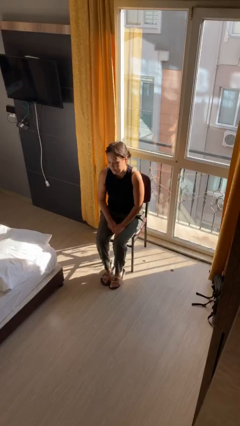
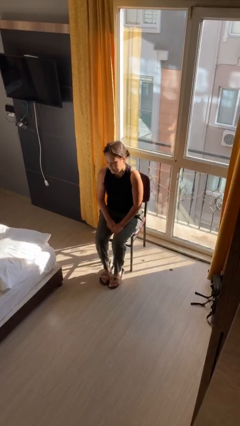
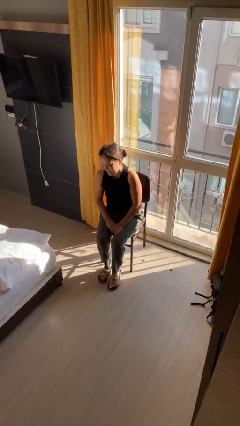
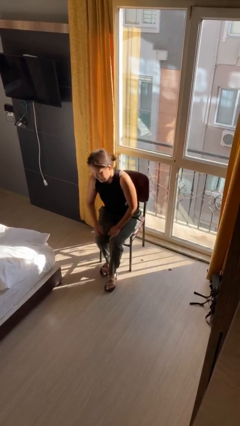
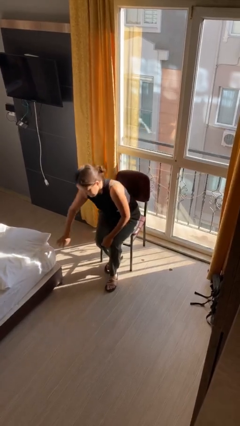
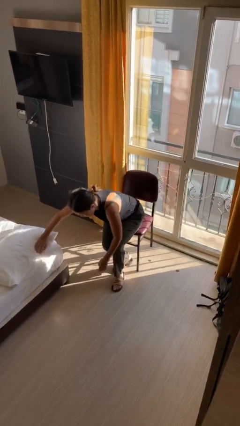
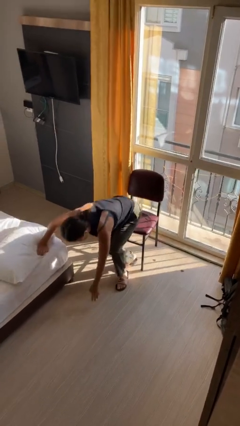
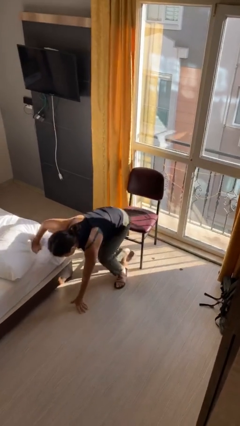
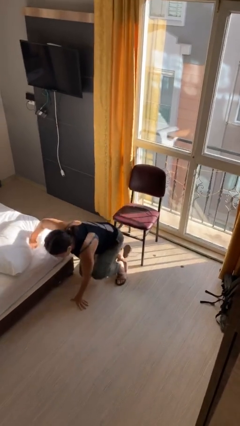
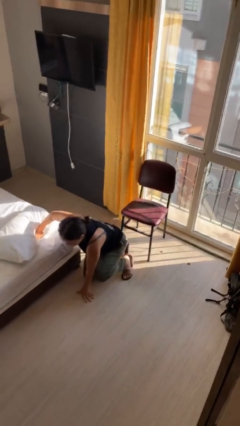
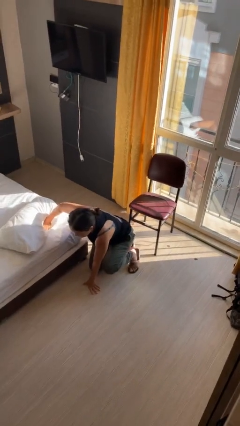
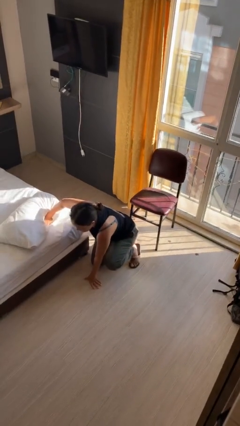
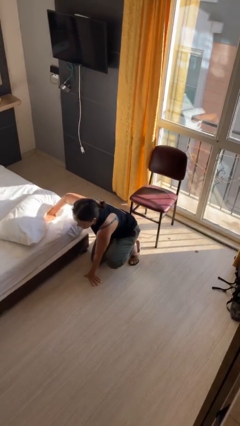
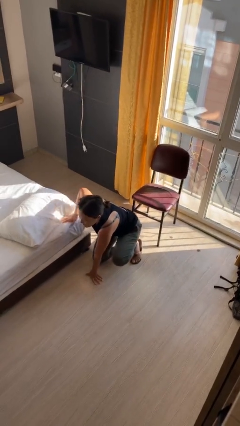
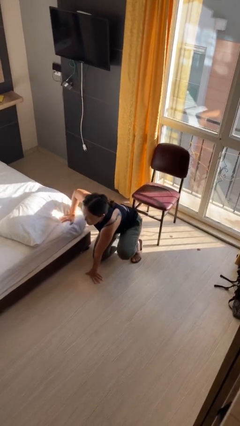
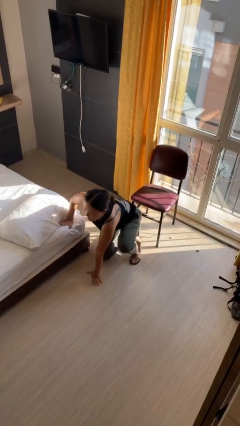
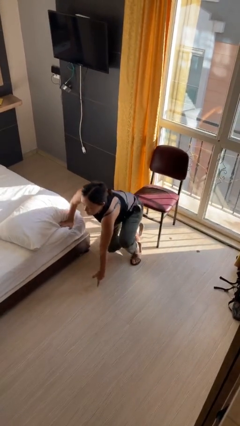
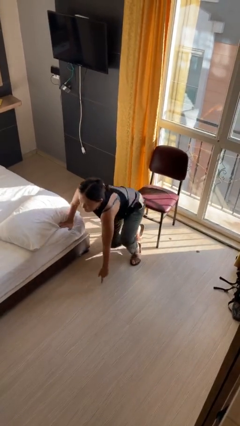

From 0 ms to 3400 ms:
person falls from chair

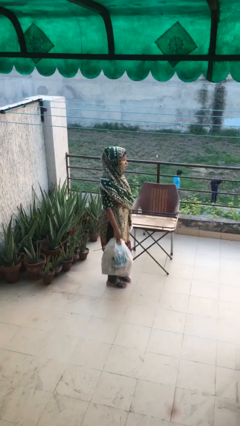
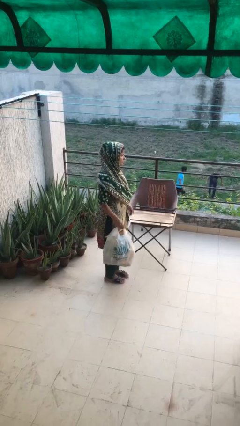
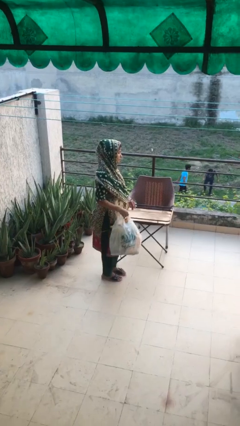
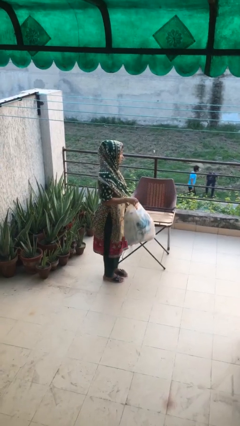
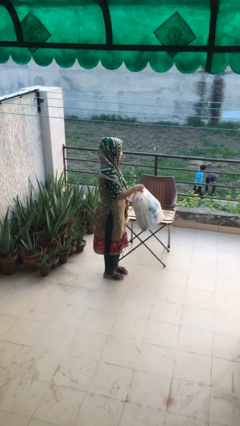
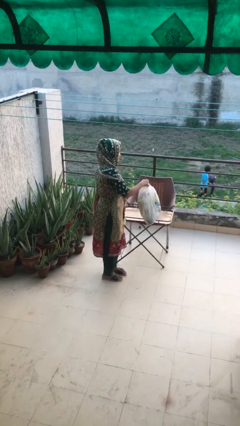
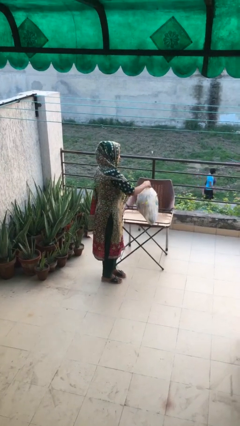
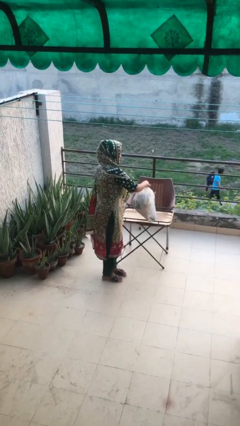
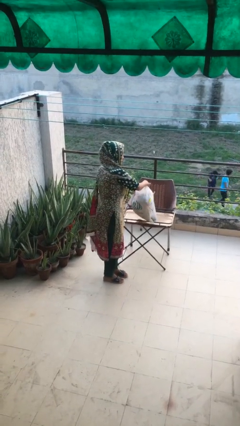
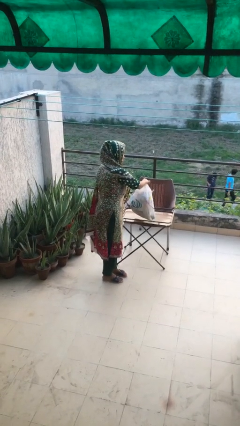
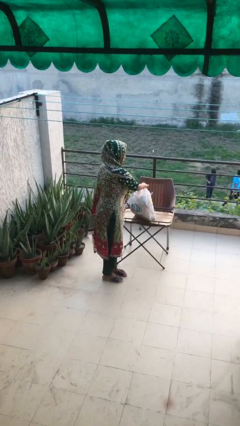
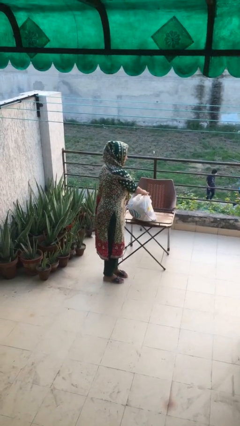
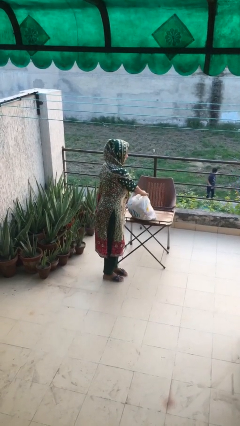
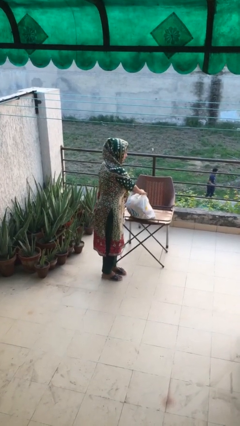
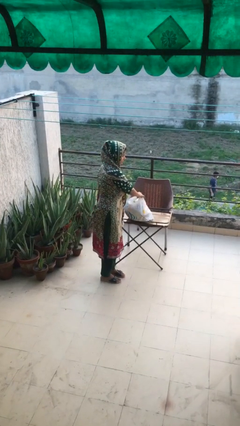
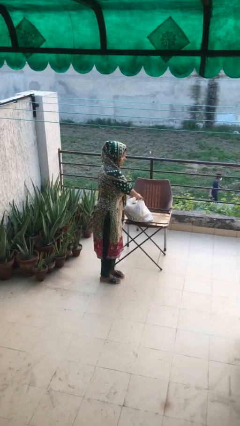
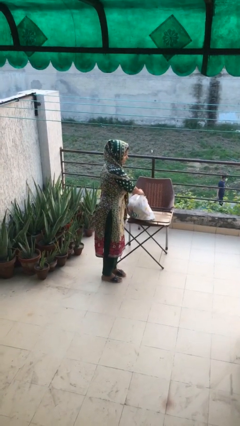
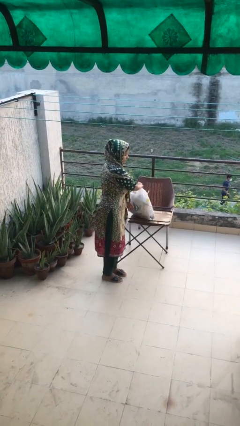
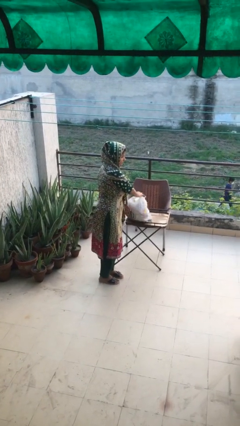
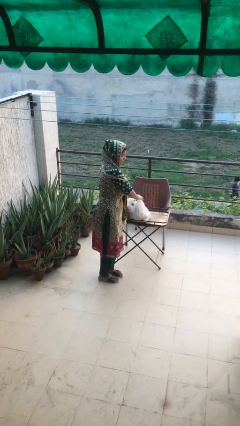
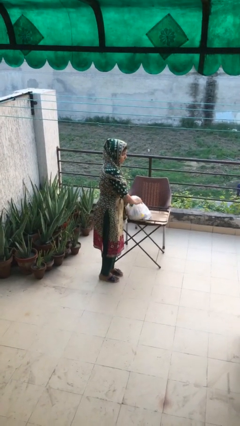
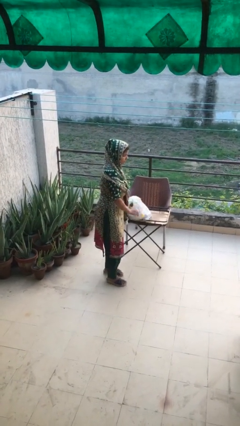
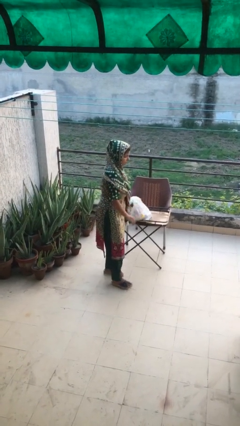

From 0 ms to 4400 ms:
person puts down object on table

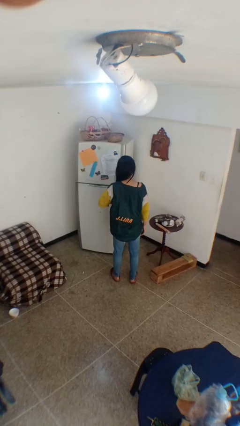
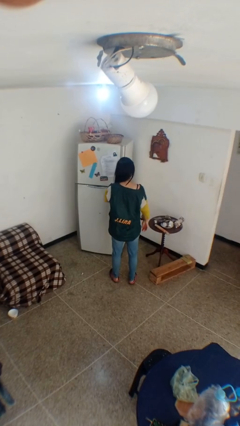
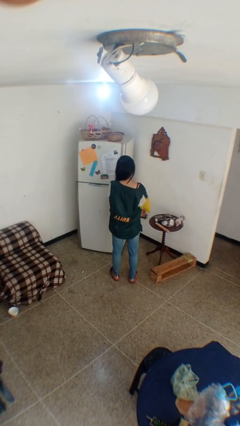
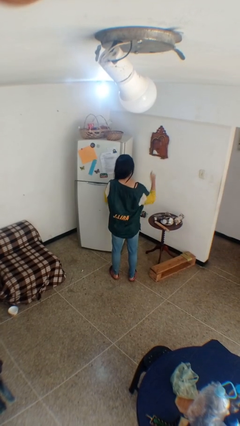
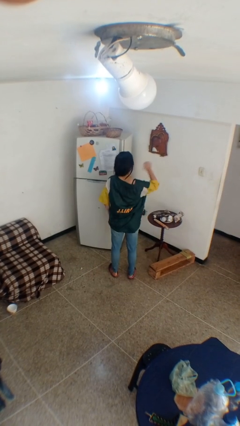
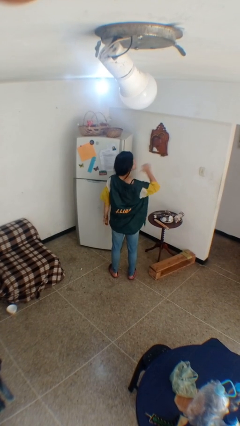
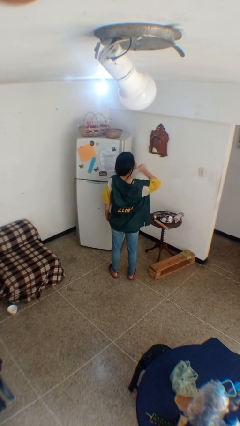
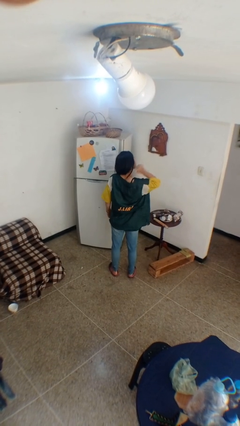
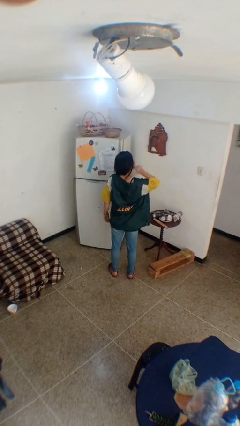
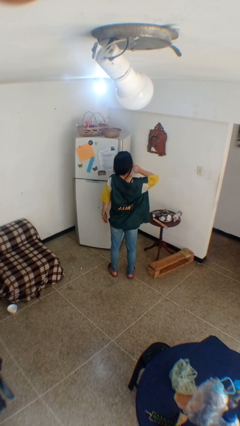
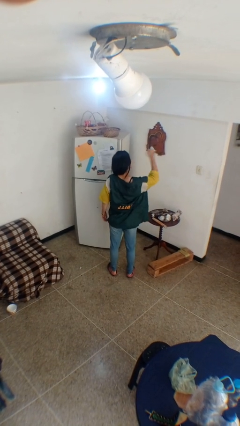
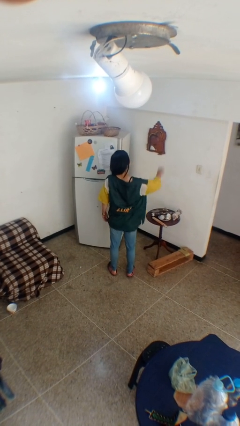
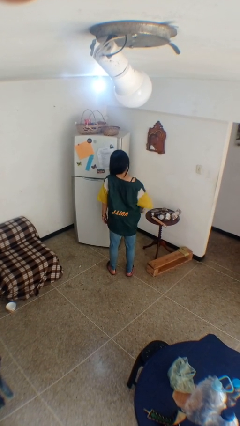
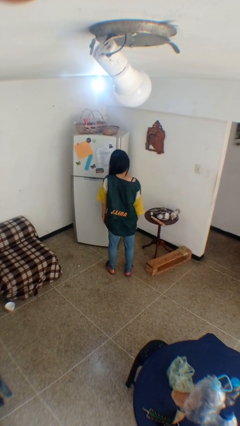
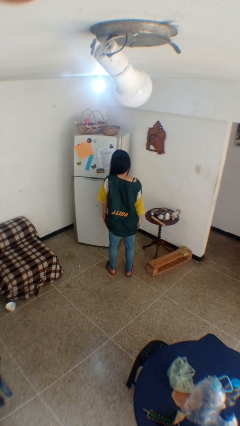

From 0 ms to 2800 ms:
person gestures behind me

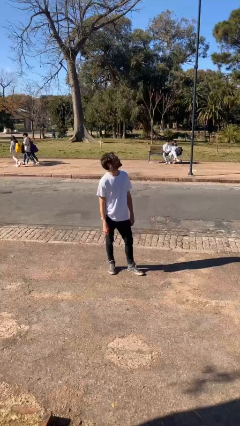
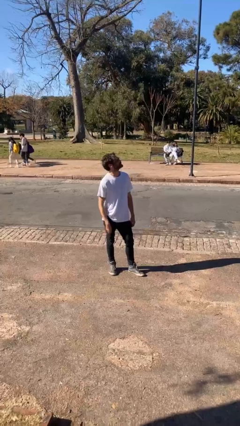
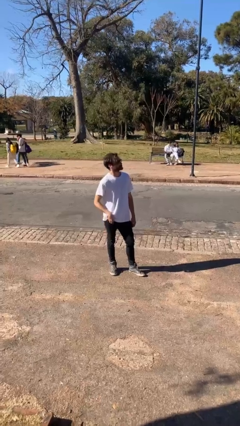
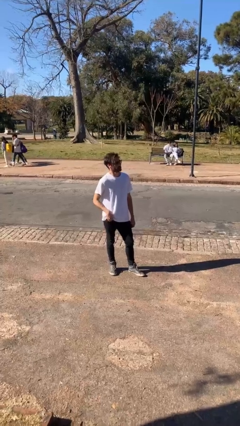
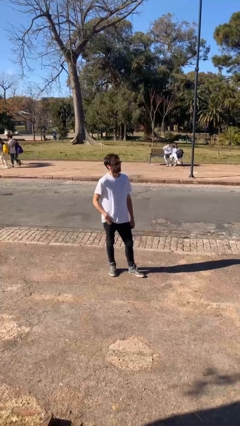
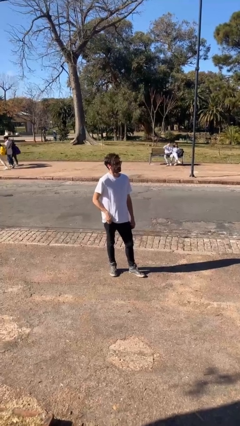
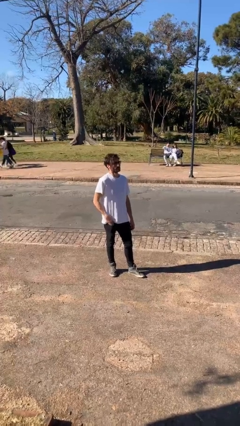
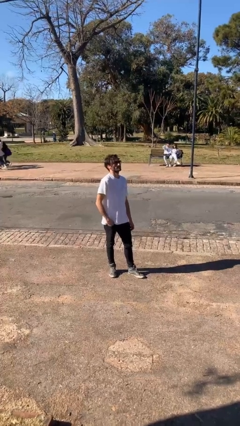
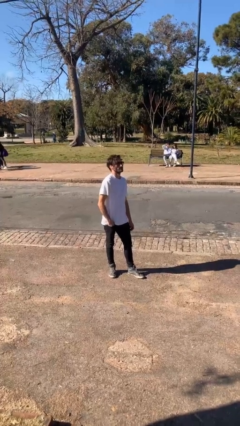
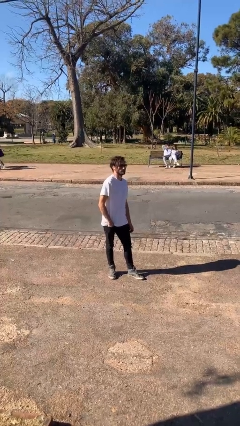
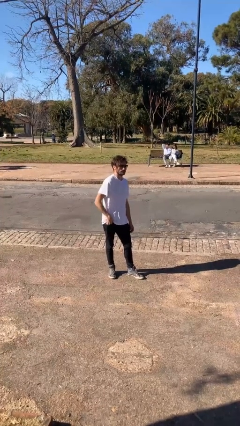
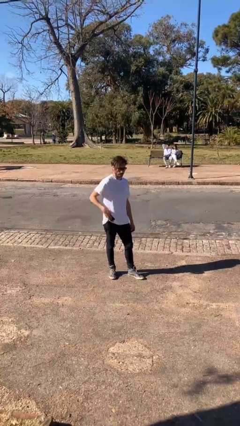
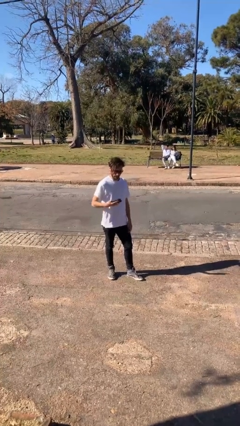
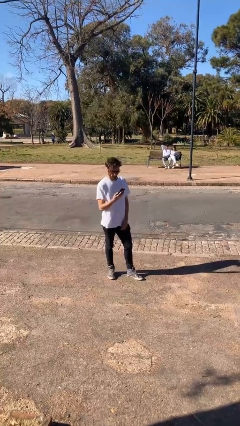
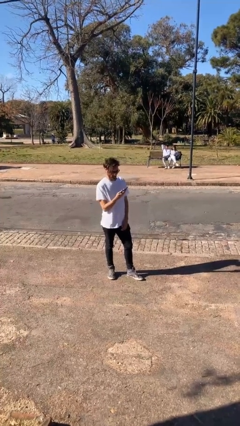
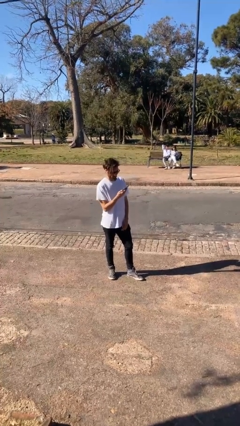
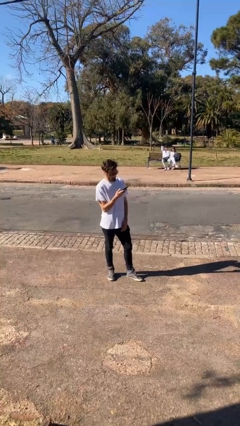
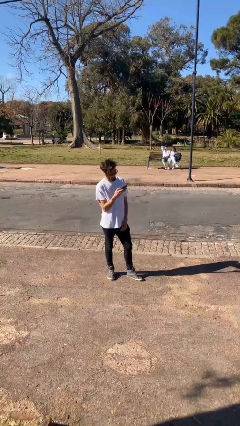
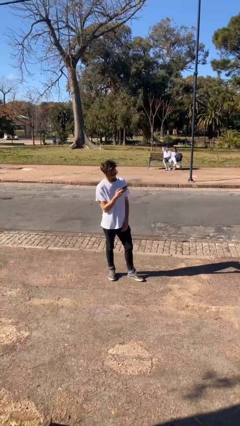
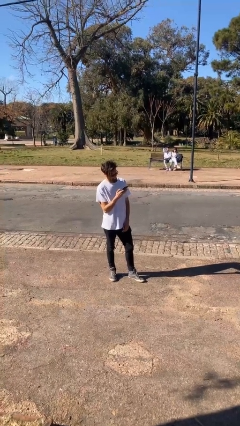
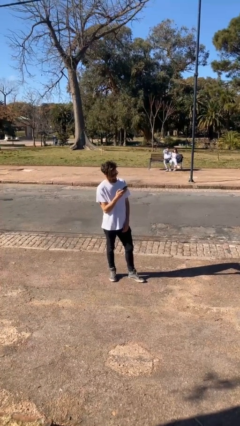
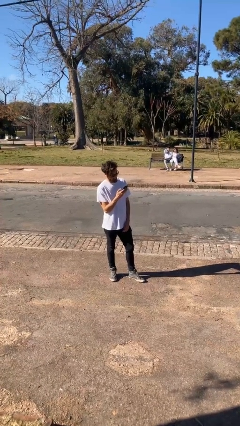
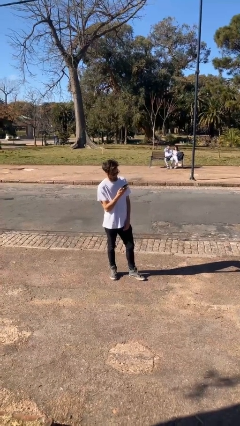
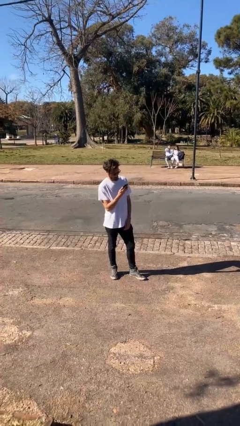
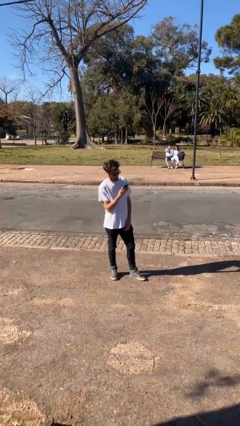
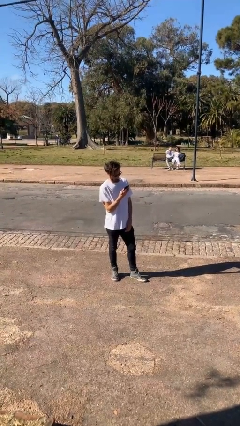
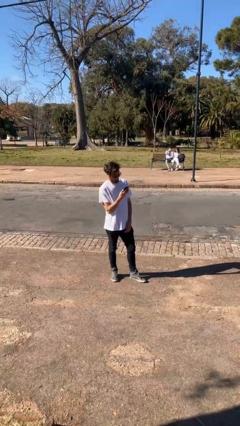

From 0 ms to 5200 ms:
person takes phone from pocket

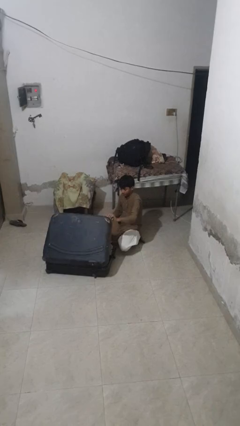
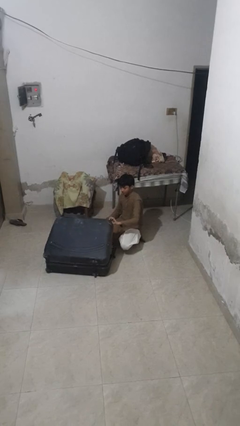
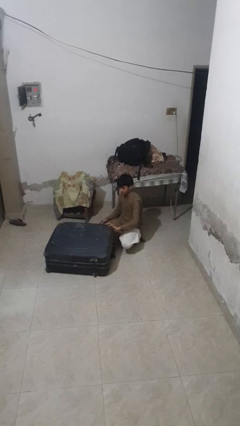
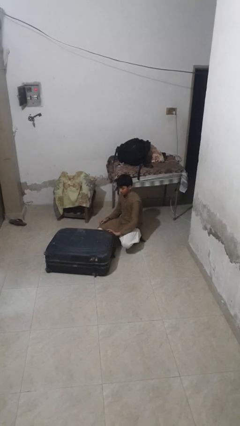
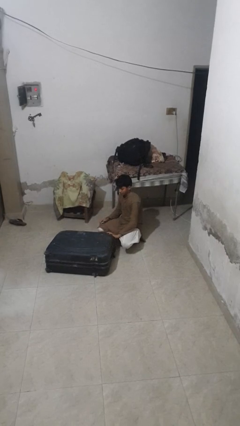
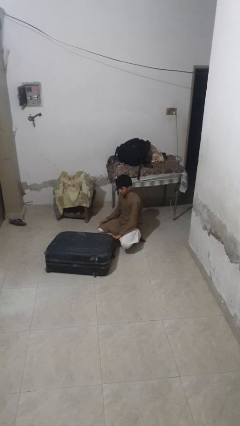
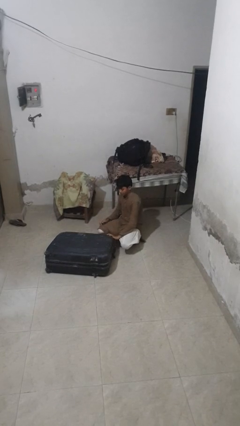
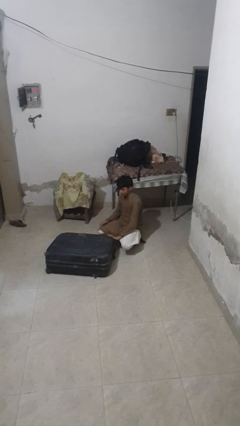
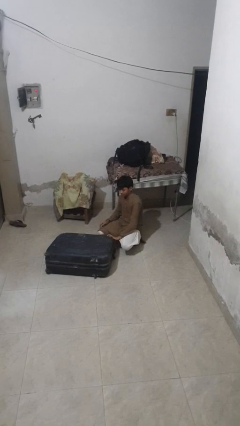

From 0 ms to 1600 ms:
person closes suitcase
